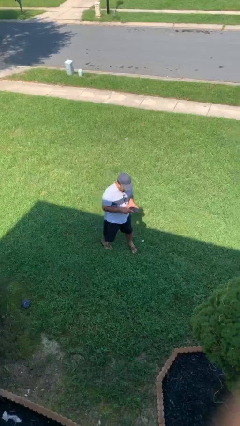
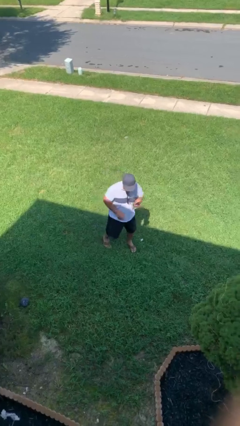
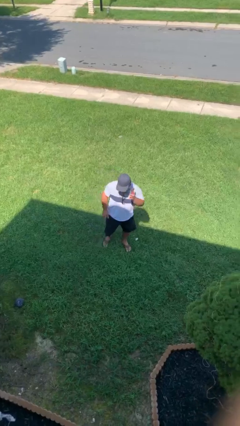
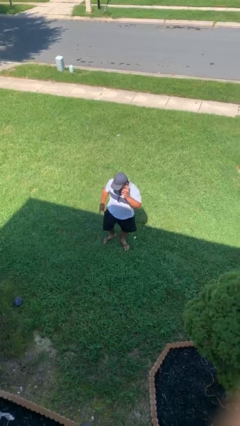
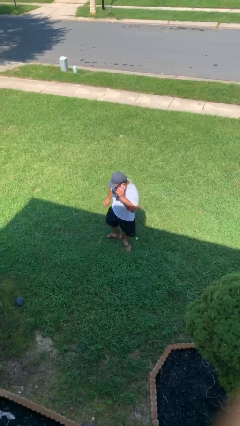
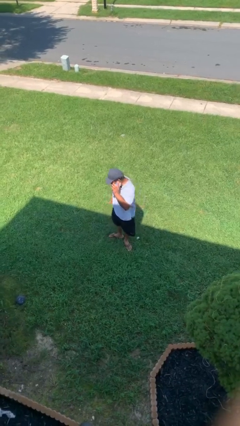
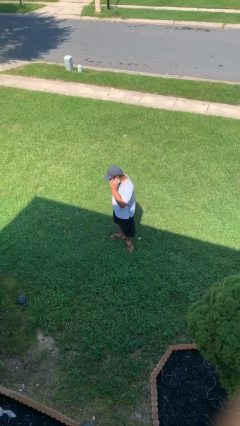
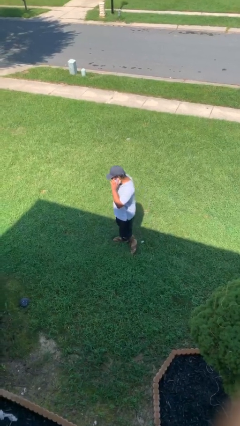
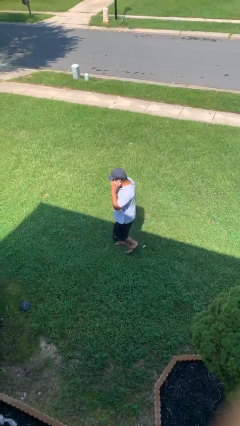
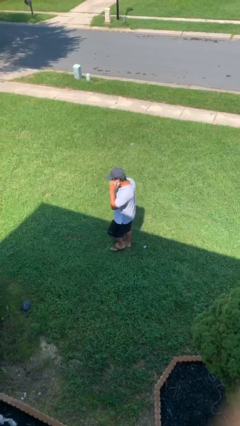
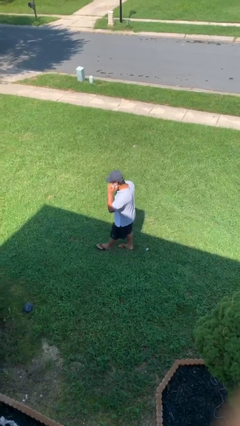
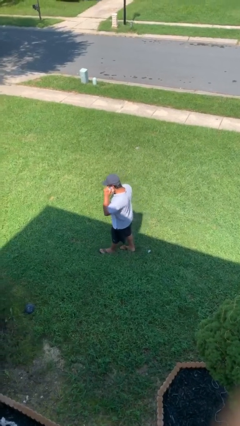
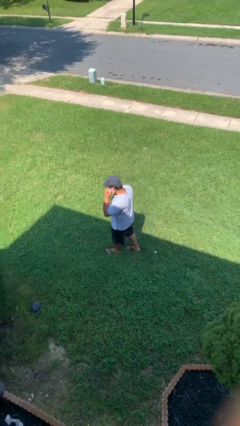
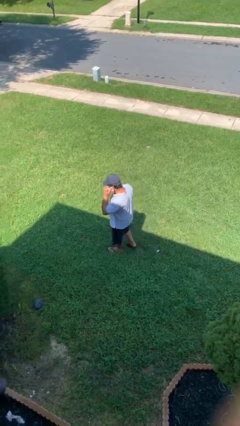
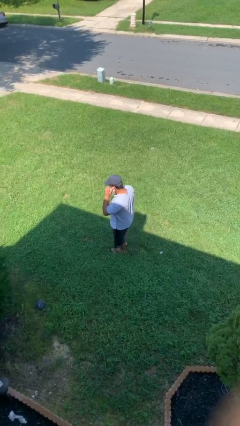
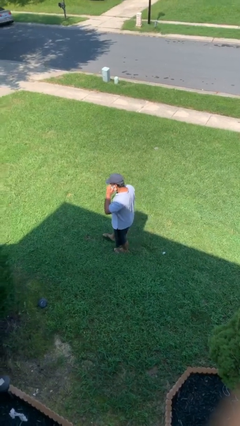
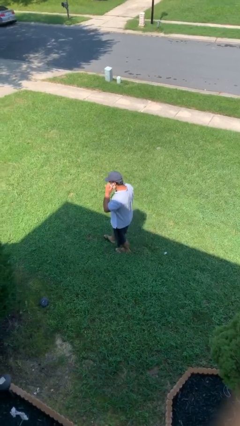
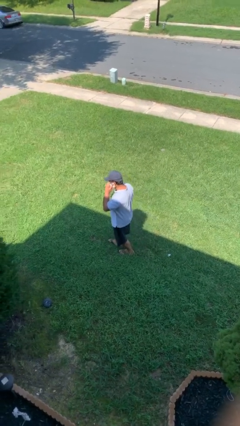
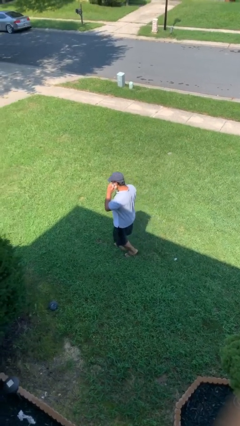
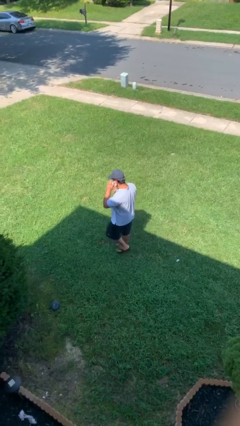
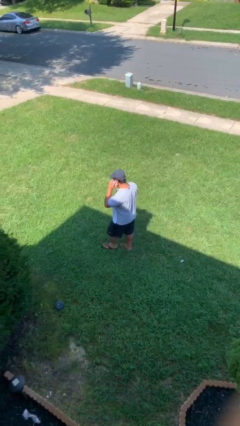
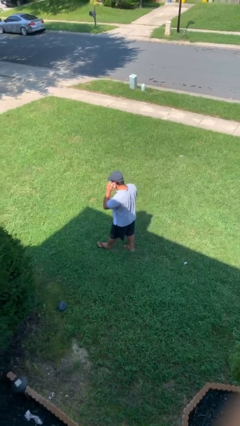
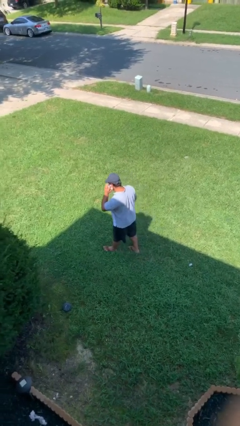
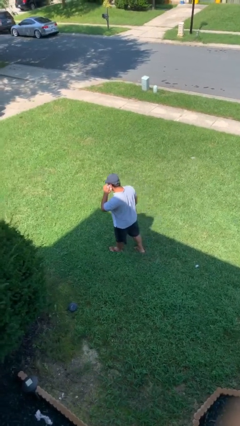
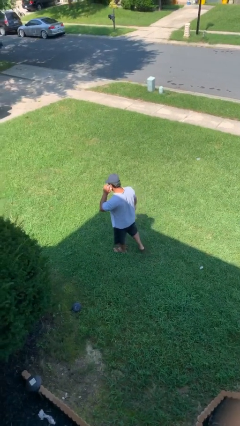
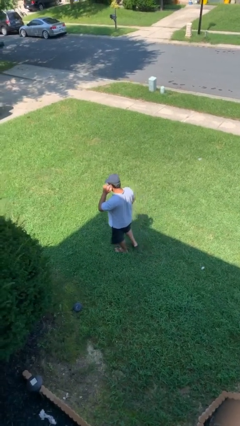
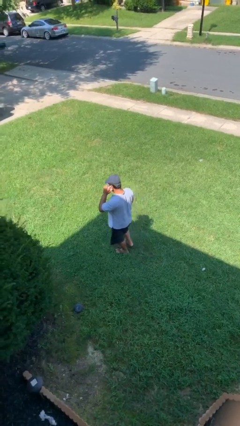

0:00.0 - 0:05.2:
person talks on phone

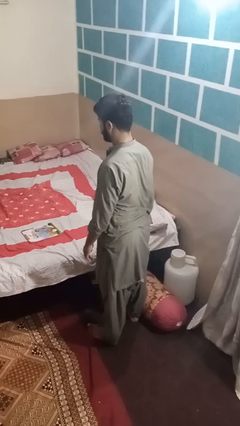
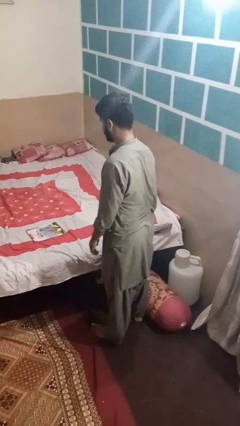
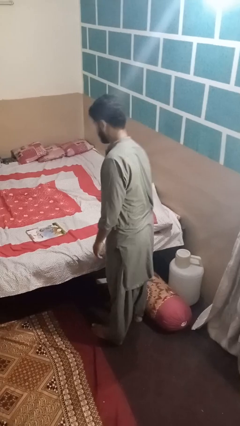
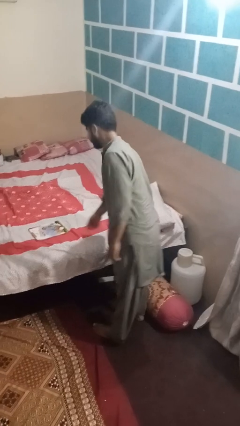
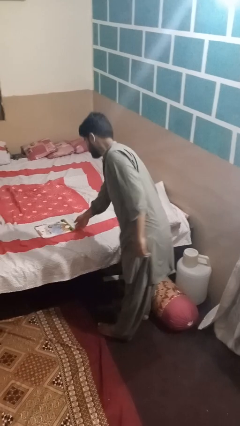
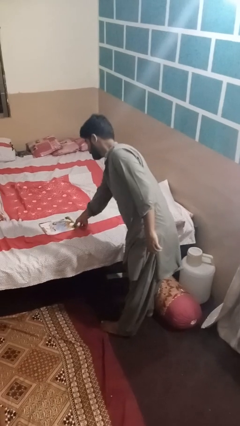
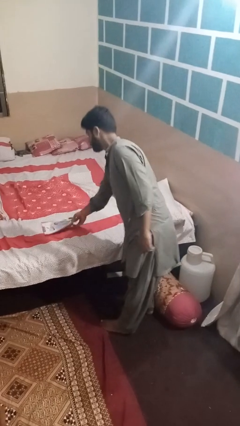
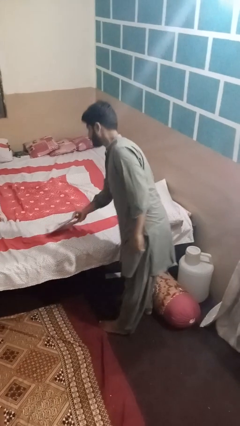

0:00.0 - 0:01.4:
person picks up object from bed

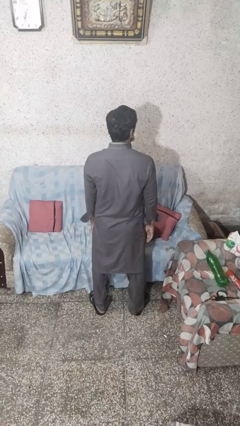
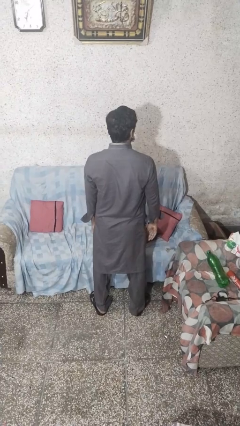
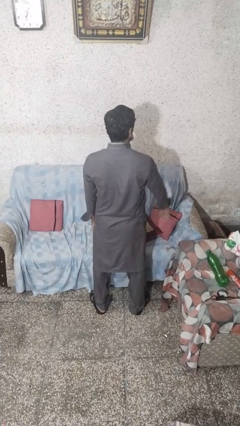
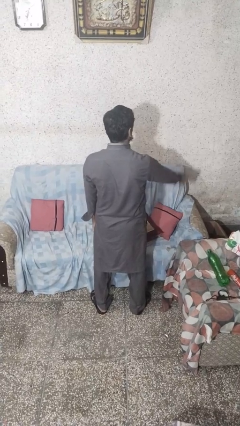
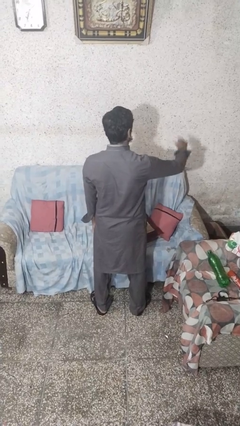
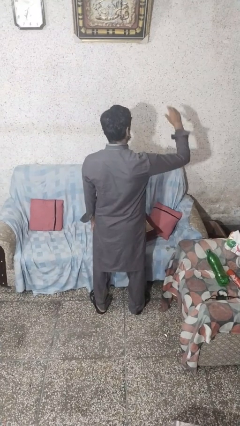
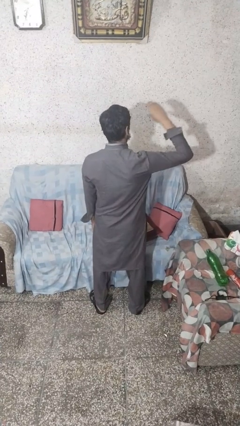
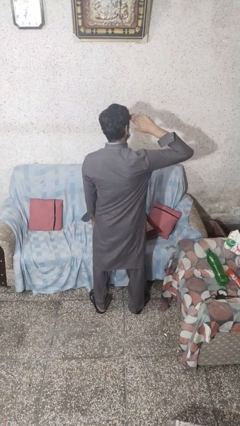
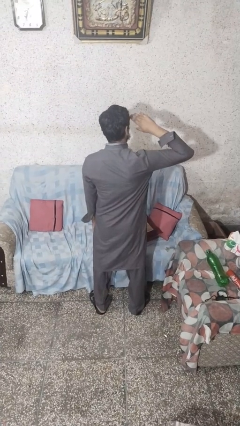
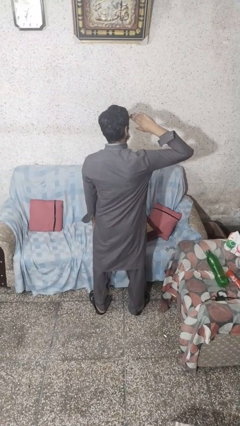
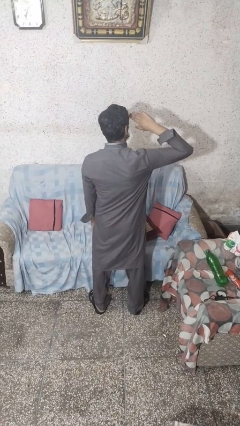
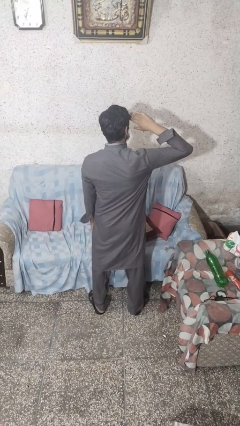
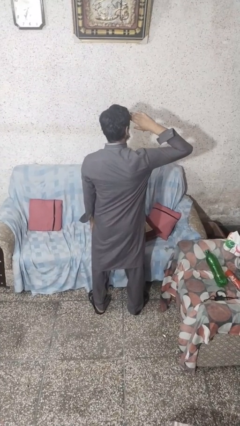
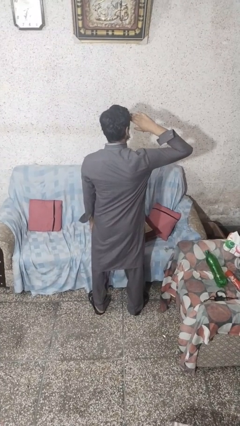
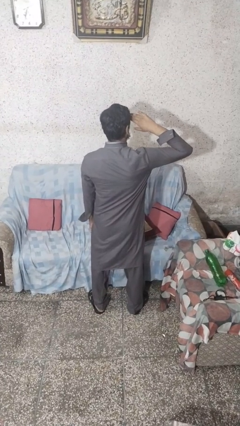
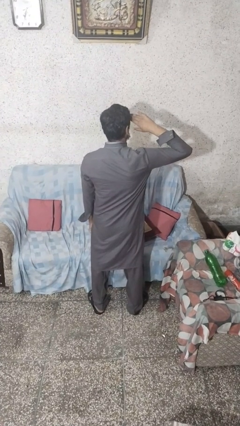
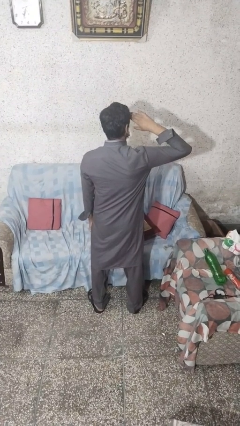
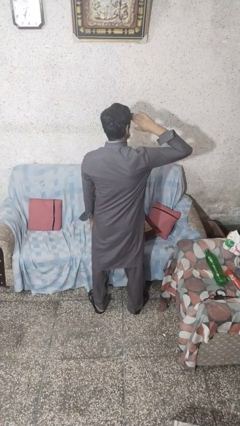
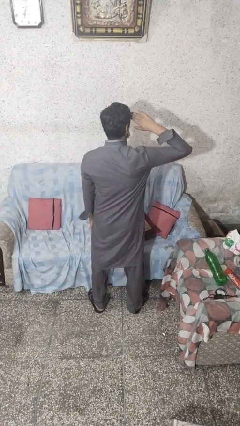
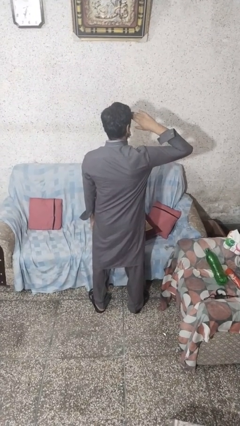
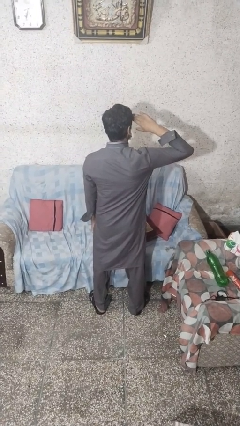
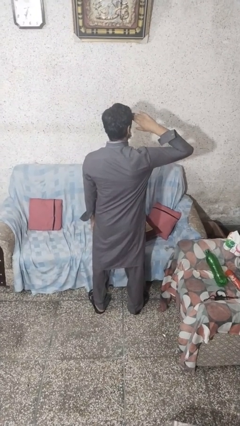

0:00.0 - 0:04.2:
person salutes

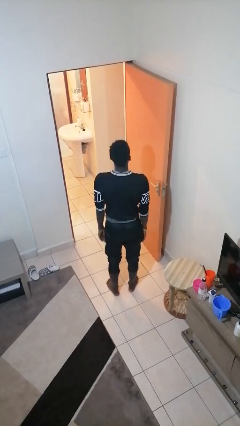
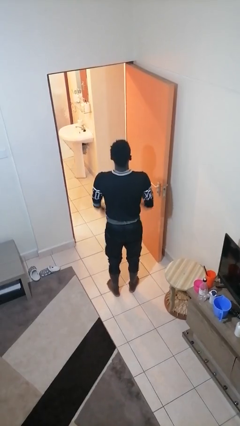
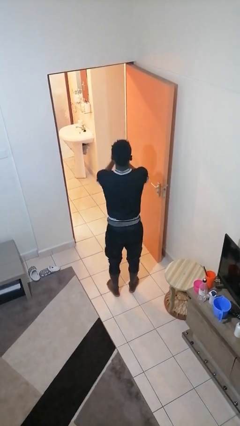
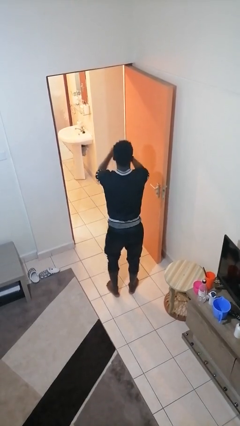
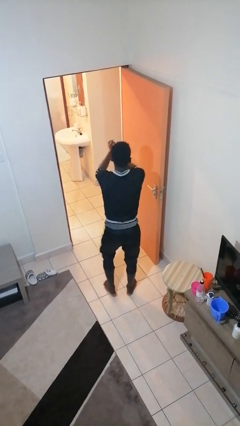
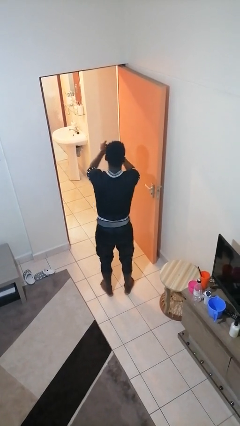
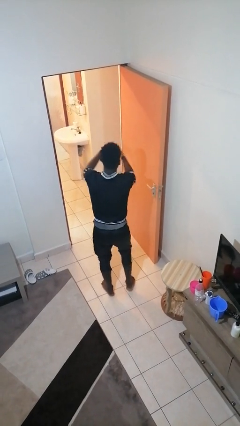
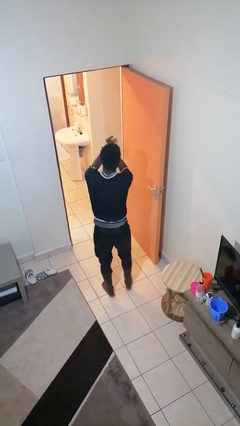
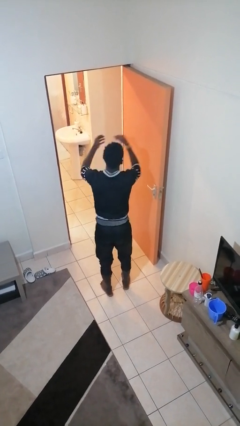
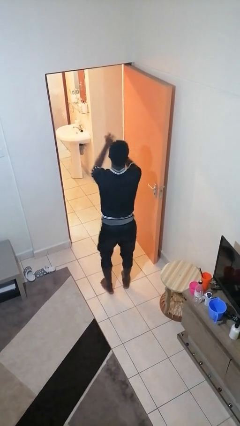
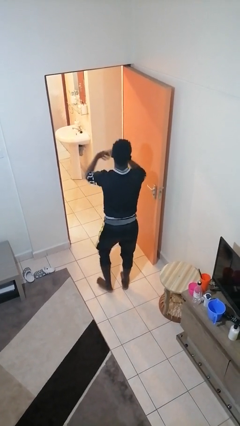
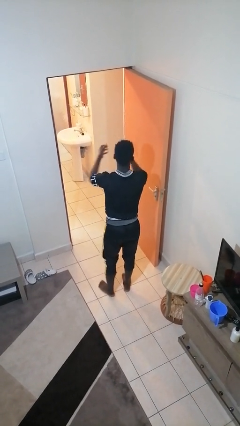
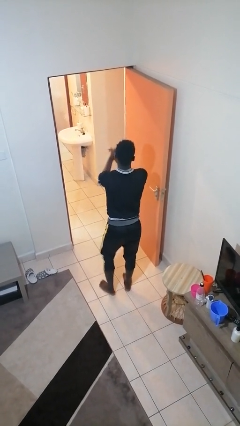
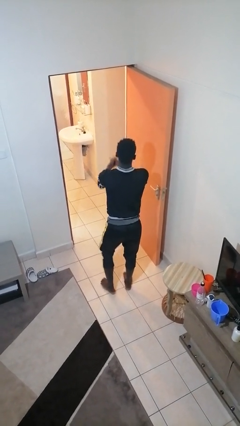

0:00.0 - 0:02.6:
person claps hands

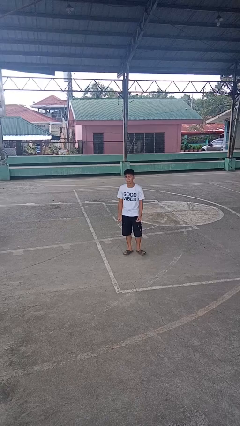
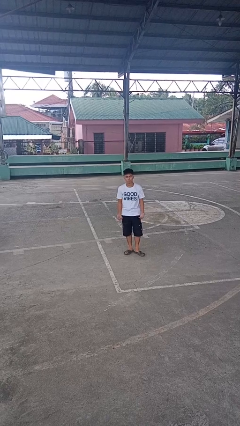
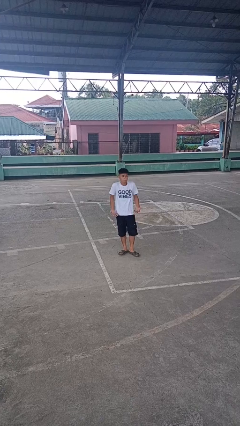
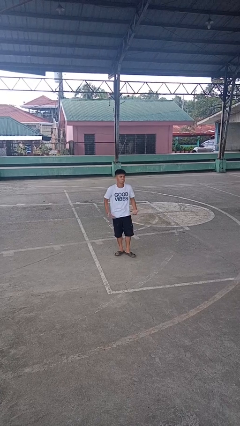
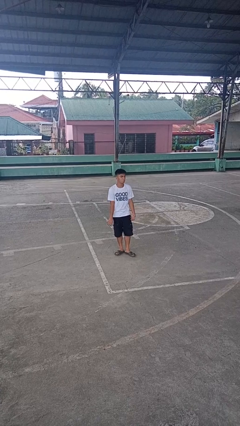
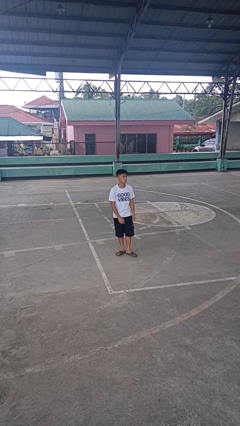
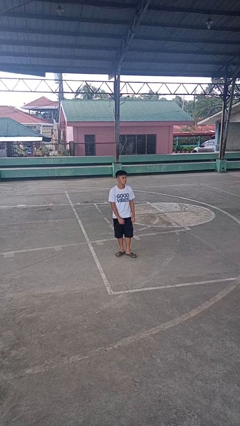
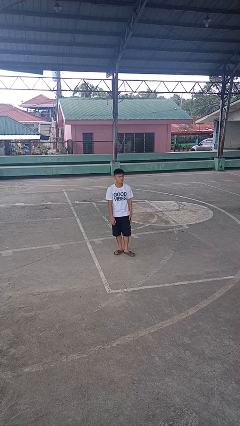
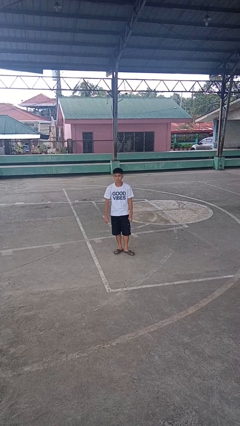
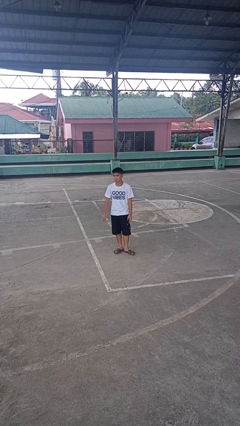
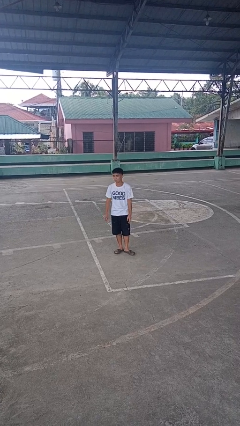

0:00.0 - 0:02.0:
person shrugs

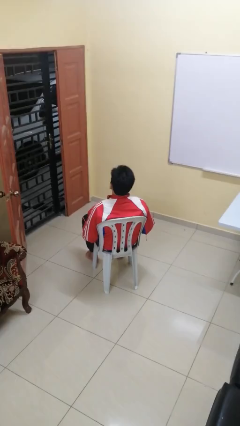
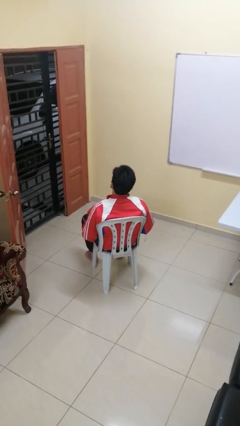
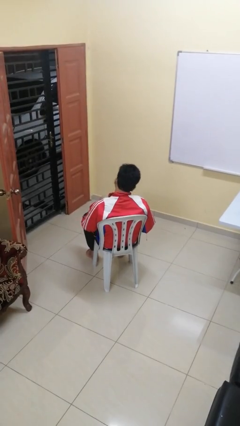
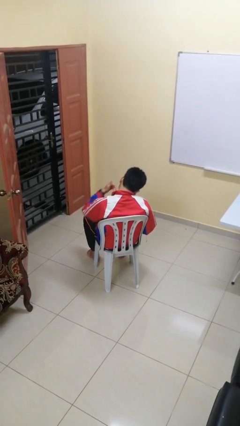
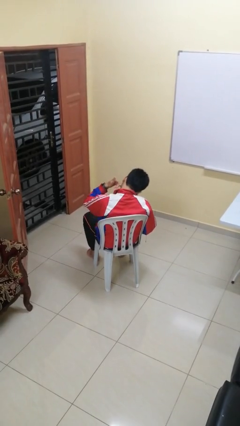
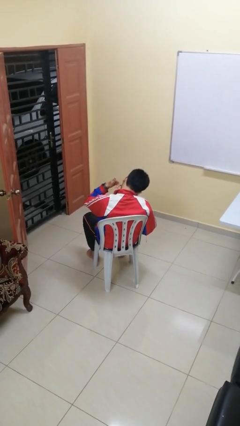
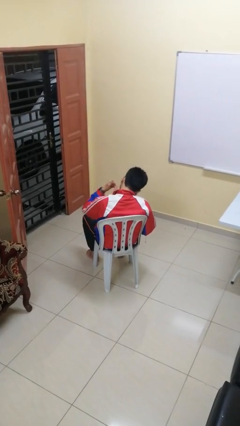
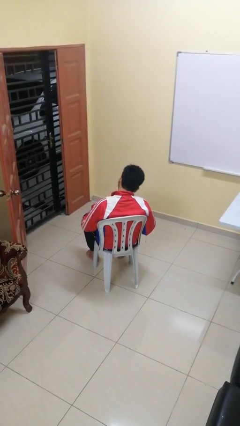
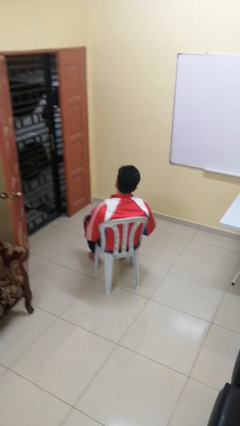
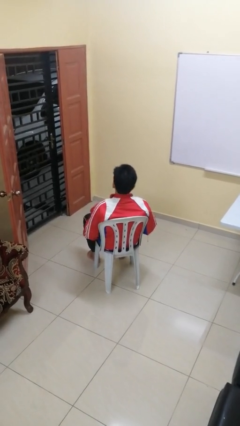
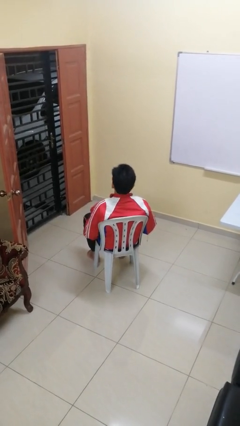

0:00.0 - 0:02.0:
person gestures call me
